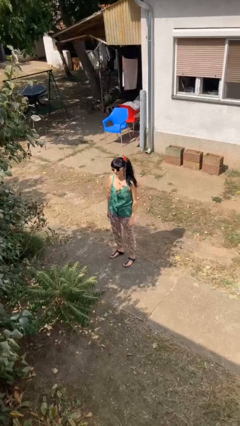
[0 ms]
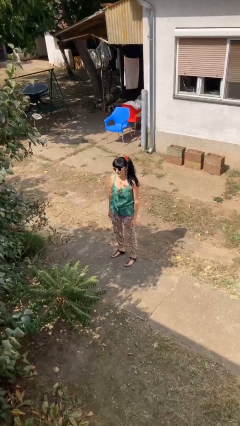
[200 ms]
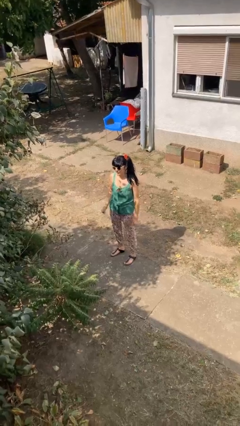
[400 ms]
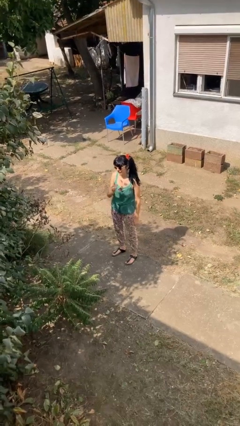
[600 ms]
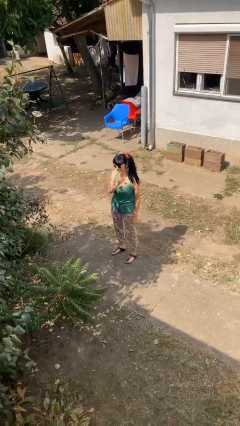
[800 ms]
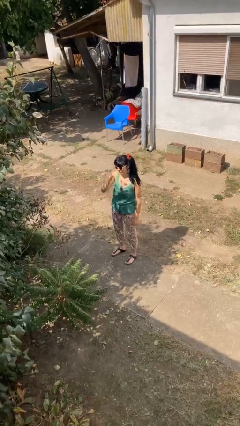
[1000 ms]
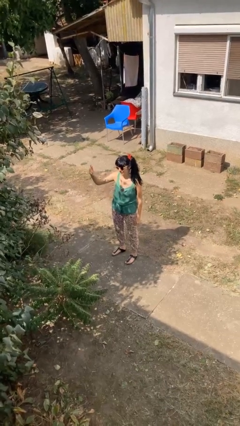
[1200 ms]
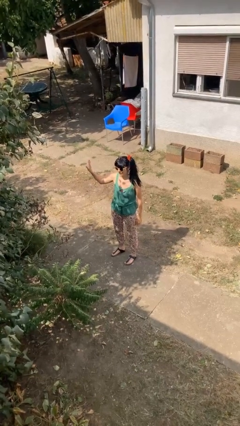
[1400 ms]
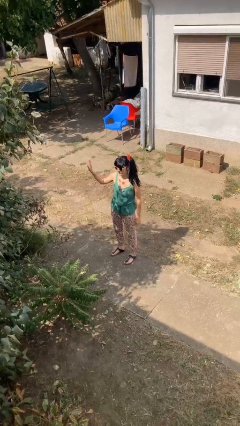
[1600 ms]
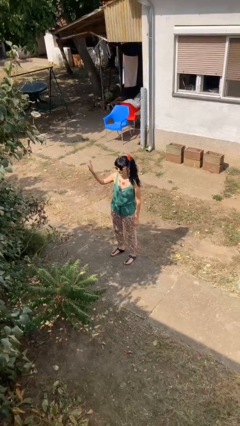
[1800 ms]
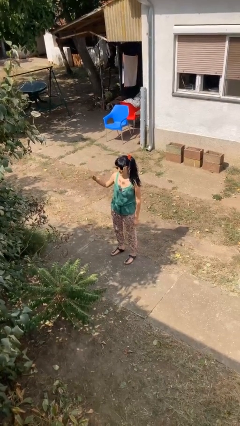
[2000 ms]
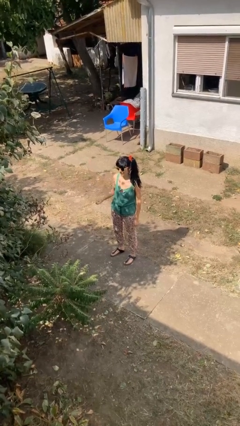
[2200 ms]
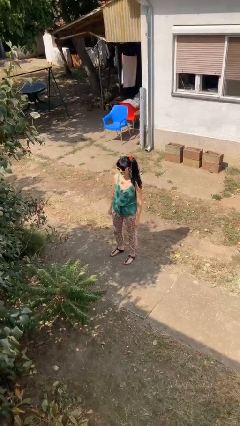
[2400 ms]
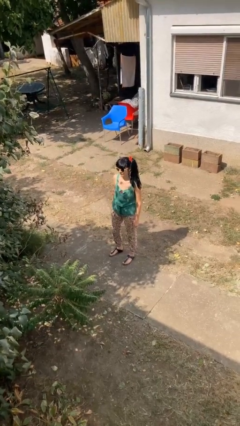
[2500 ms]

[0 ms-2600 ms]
person gestures swipe right

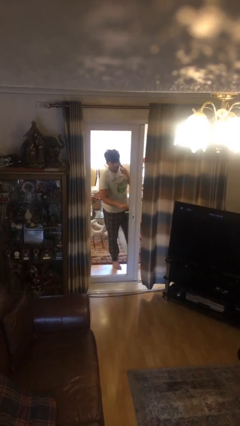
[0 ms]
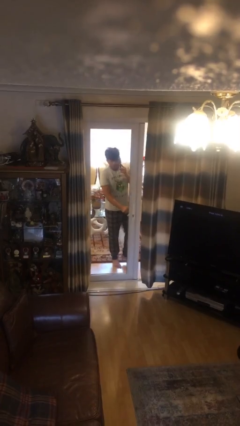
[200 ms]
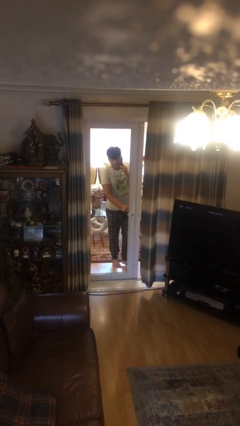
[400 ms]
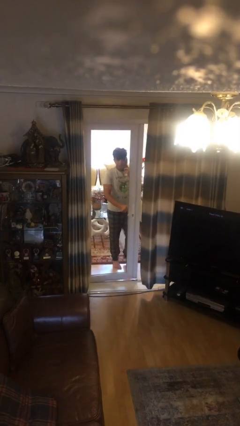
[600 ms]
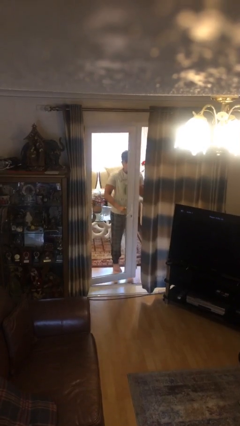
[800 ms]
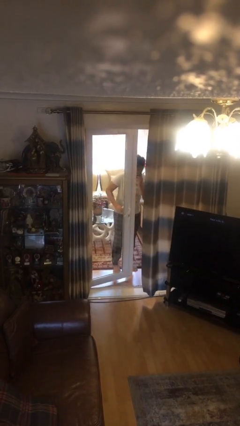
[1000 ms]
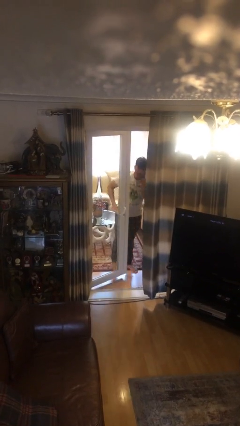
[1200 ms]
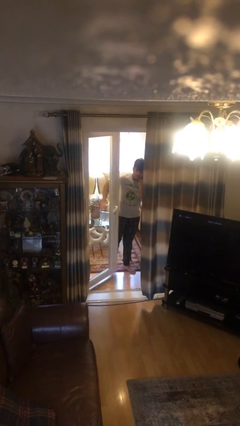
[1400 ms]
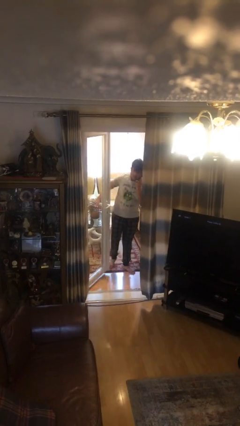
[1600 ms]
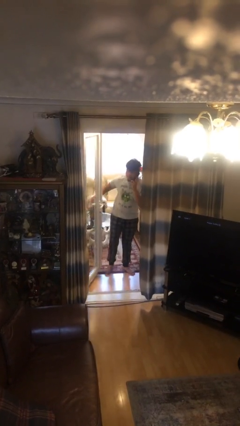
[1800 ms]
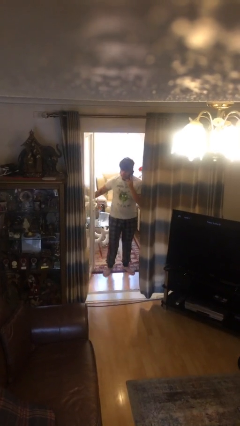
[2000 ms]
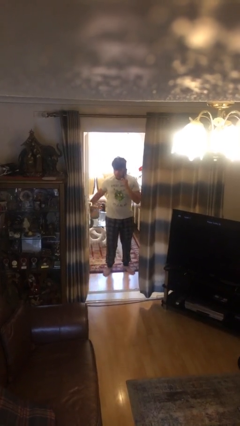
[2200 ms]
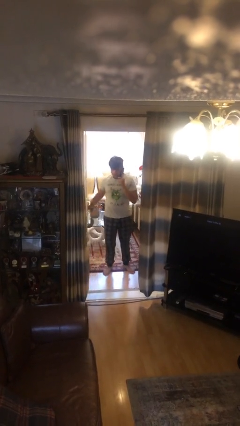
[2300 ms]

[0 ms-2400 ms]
person opens facility door

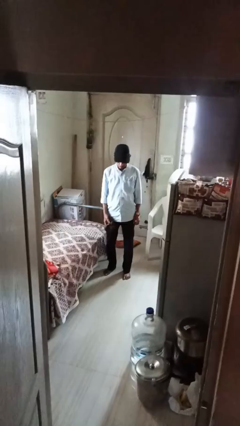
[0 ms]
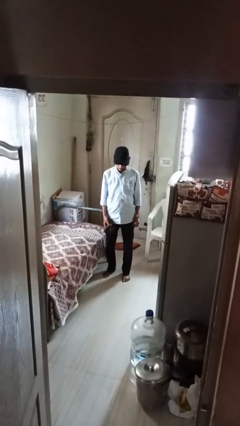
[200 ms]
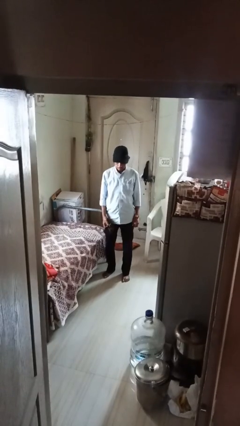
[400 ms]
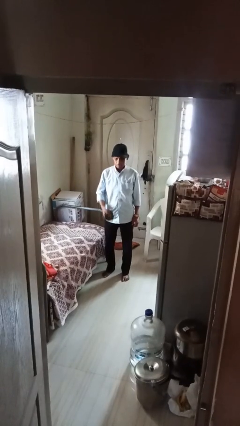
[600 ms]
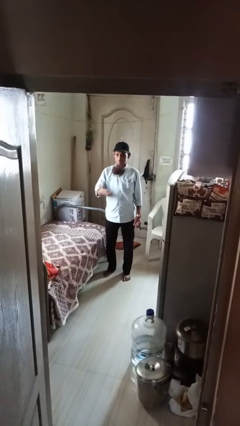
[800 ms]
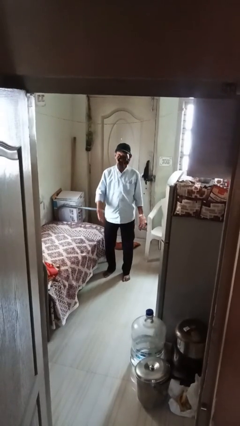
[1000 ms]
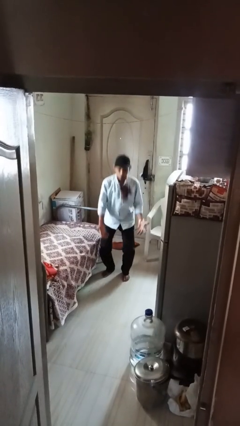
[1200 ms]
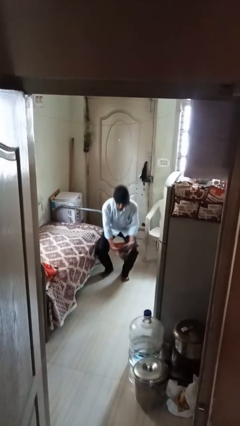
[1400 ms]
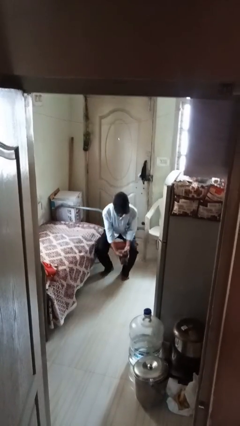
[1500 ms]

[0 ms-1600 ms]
person drops object

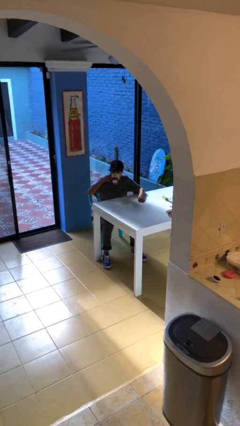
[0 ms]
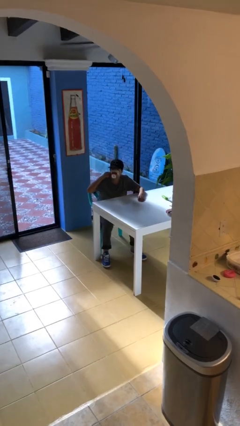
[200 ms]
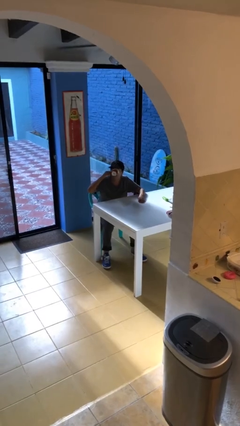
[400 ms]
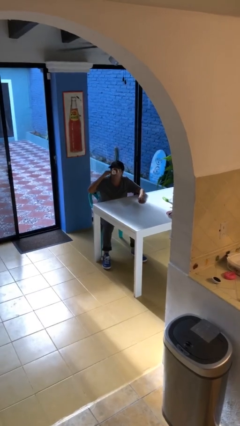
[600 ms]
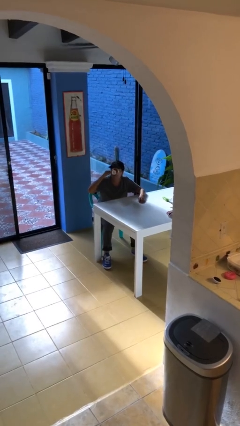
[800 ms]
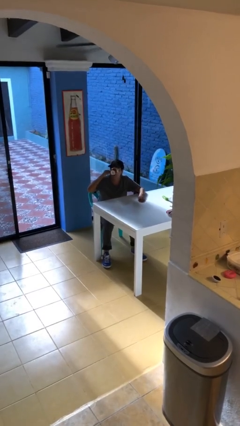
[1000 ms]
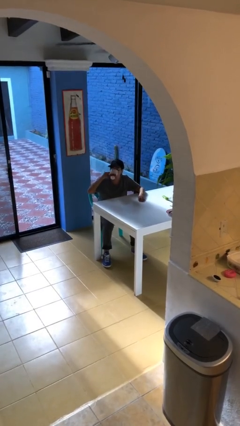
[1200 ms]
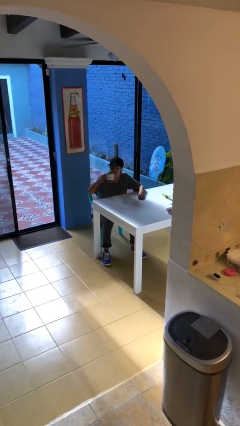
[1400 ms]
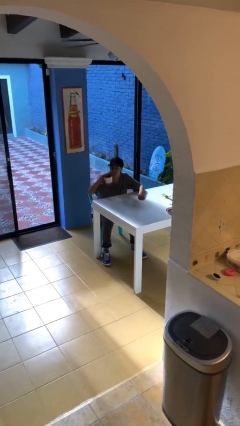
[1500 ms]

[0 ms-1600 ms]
person drinks from mug

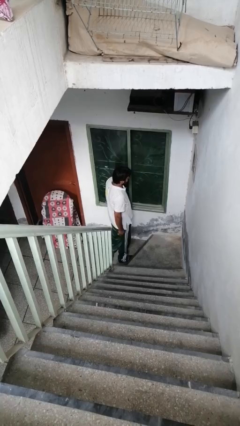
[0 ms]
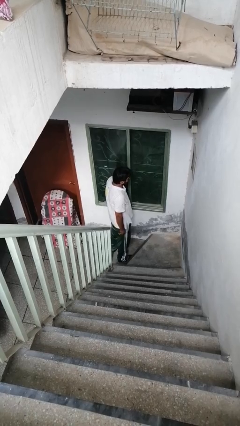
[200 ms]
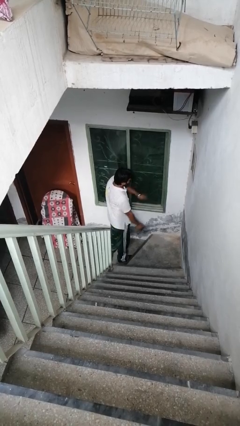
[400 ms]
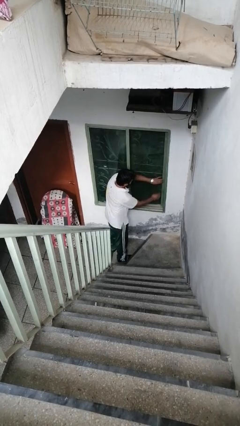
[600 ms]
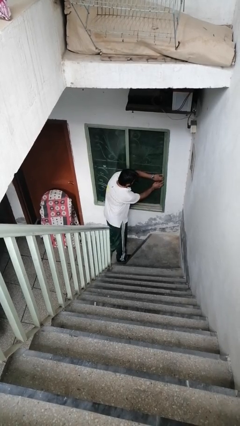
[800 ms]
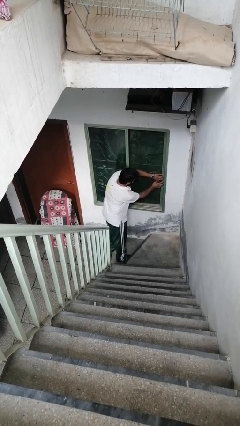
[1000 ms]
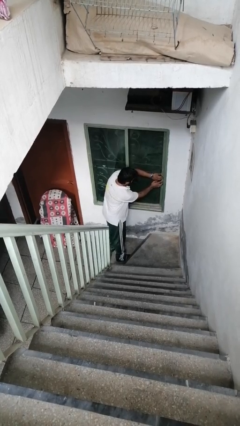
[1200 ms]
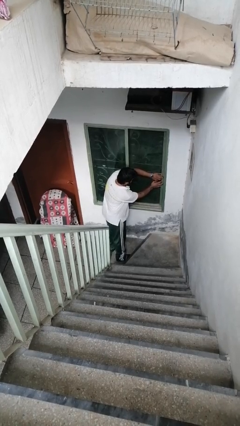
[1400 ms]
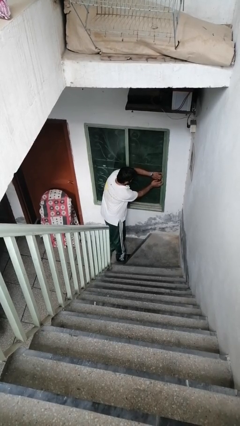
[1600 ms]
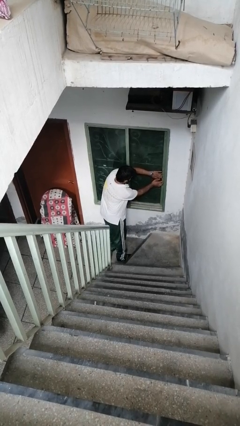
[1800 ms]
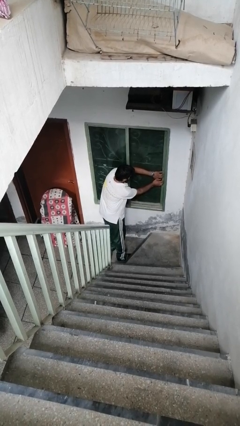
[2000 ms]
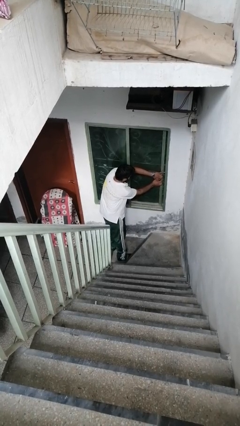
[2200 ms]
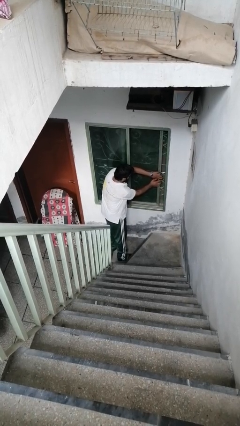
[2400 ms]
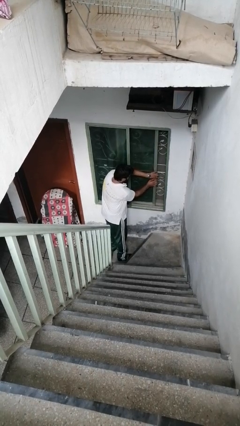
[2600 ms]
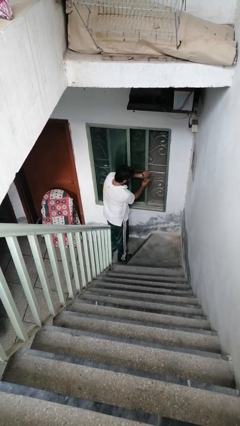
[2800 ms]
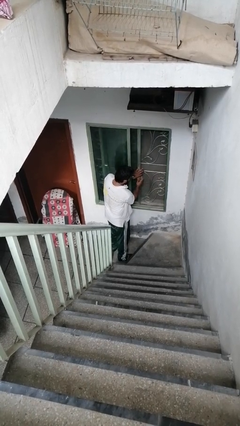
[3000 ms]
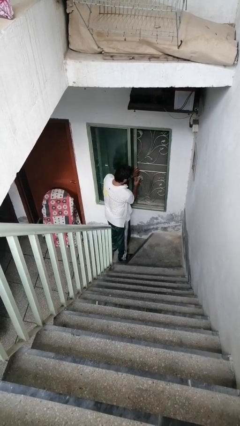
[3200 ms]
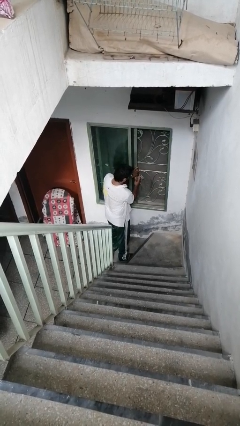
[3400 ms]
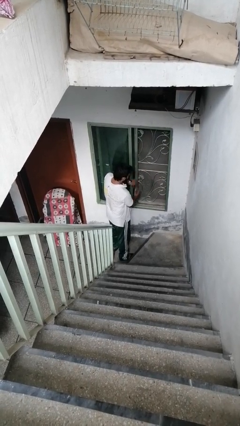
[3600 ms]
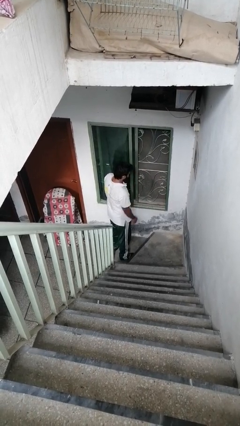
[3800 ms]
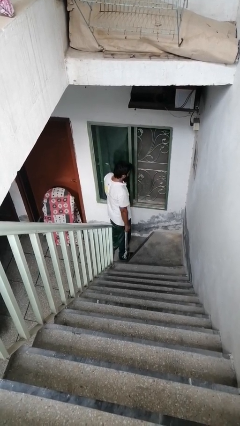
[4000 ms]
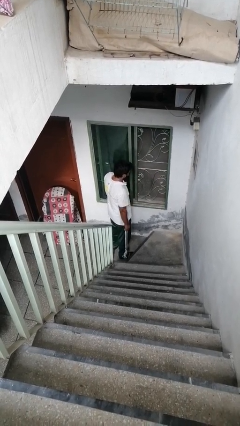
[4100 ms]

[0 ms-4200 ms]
person opens home window

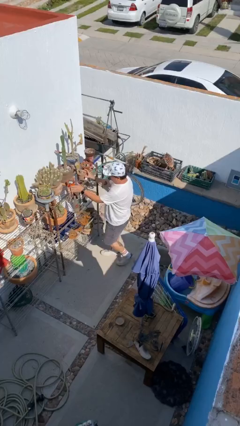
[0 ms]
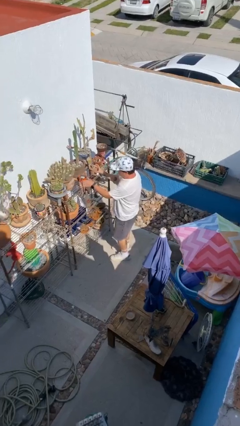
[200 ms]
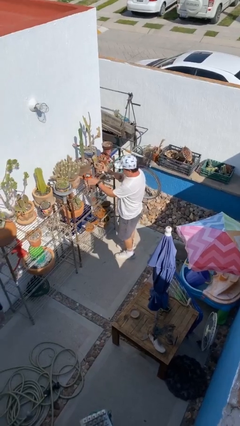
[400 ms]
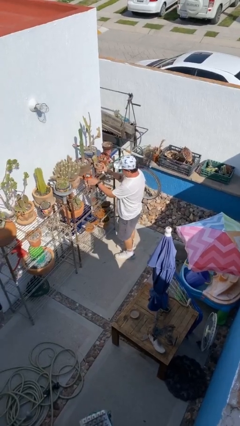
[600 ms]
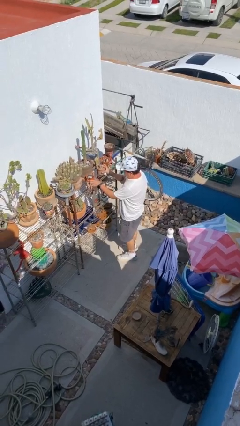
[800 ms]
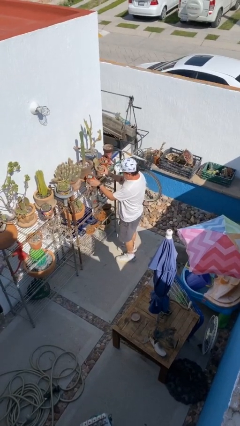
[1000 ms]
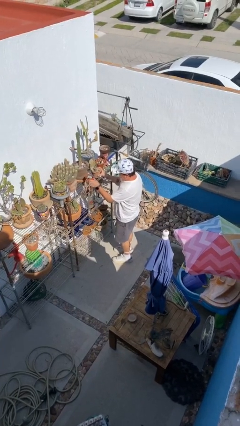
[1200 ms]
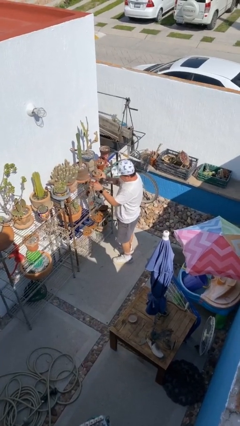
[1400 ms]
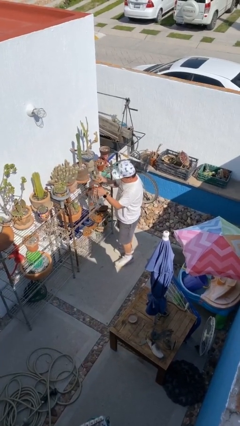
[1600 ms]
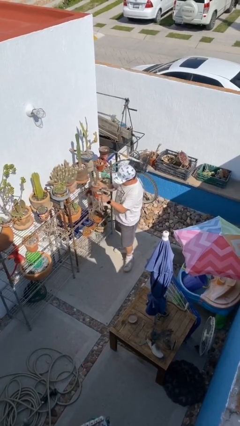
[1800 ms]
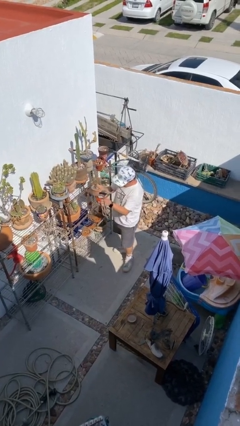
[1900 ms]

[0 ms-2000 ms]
person picks up object from shelf

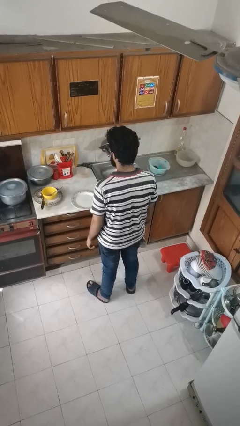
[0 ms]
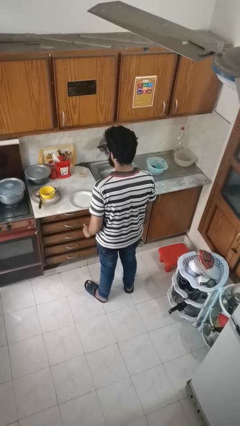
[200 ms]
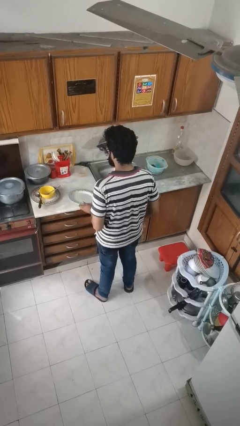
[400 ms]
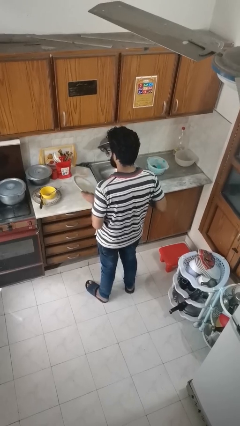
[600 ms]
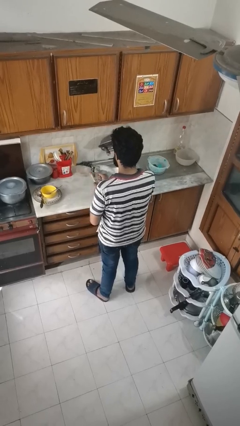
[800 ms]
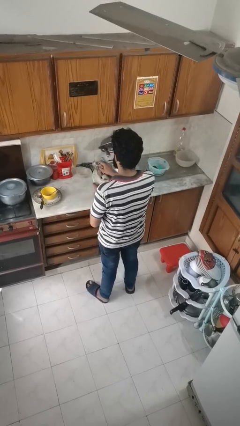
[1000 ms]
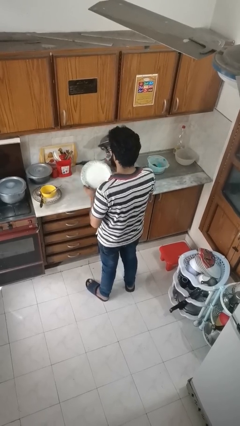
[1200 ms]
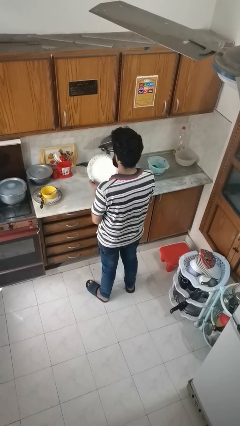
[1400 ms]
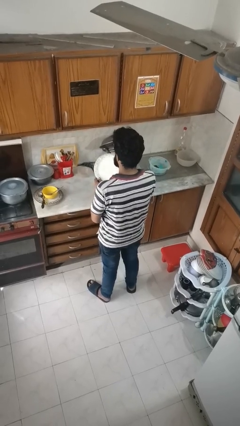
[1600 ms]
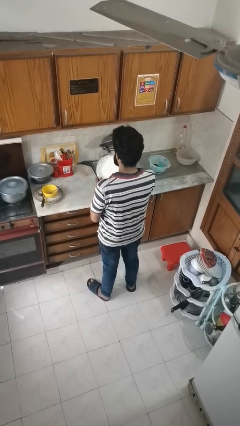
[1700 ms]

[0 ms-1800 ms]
person dries dish

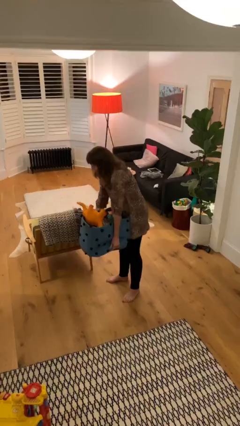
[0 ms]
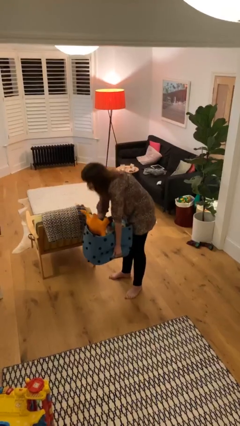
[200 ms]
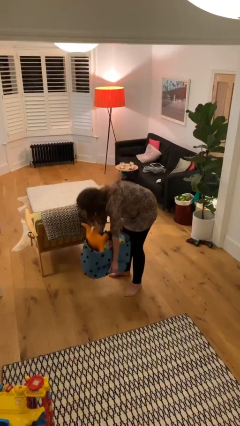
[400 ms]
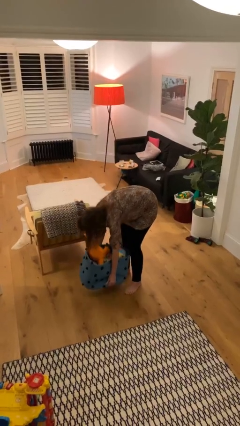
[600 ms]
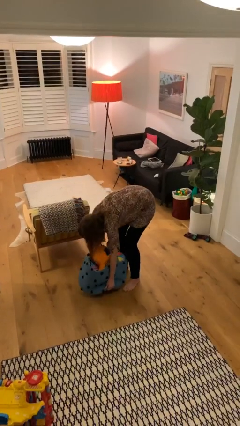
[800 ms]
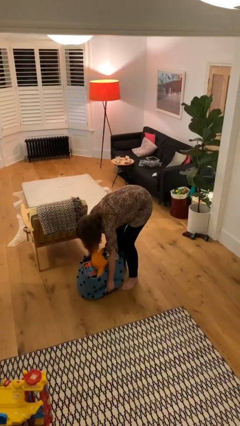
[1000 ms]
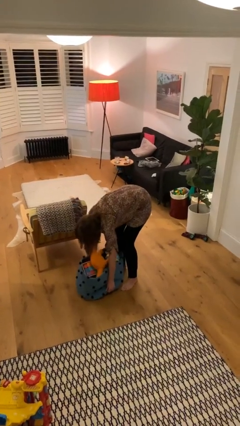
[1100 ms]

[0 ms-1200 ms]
person puts down object on floor
